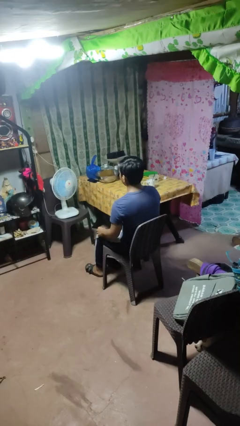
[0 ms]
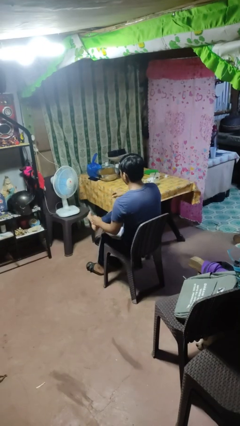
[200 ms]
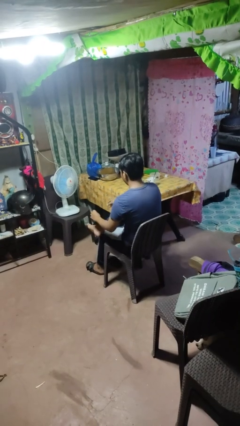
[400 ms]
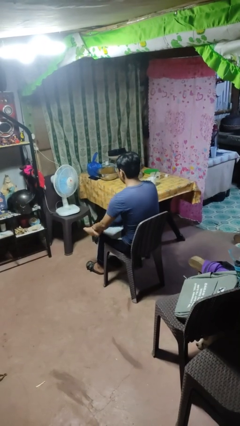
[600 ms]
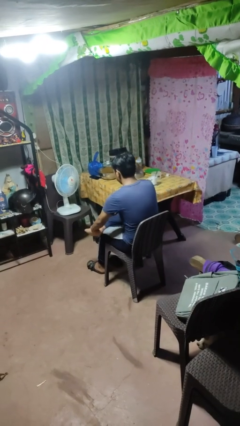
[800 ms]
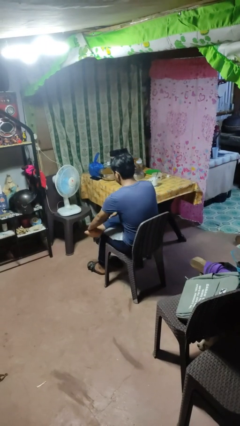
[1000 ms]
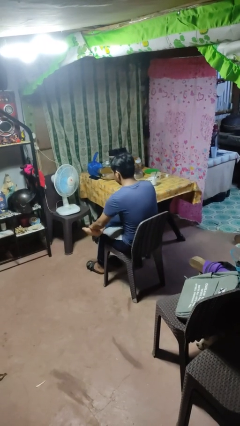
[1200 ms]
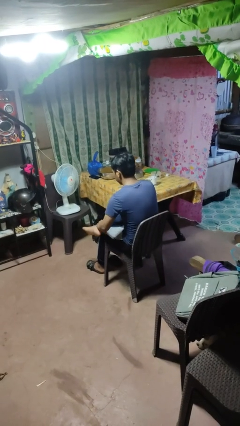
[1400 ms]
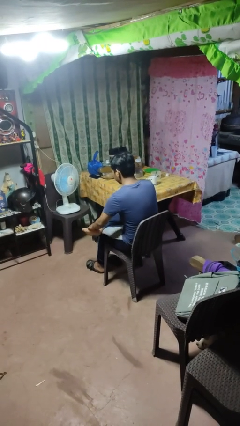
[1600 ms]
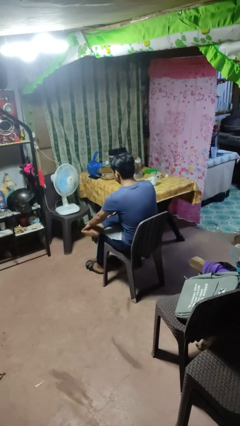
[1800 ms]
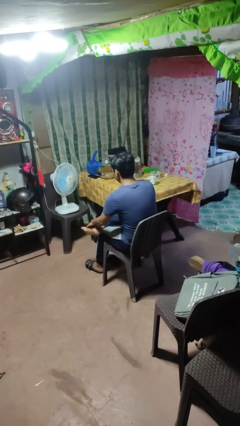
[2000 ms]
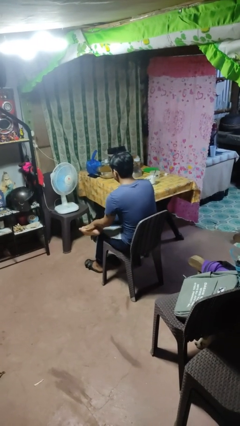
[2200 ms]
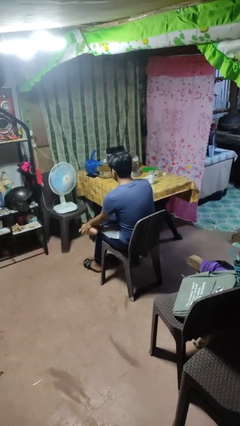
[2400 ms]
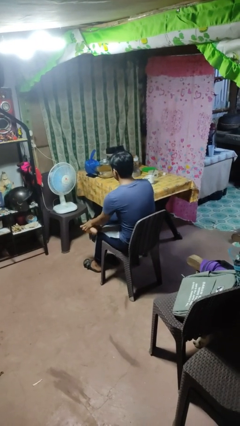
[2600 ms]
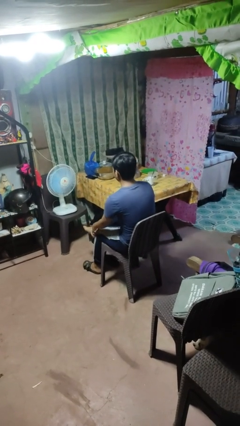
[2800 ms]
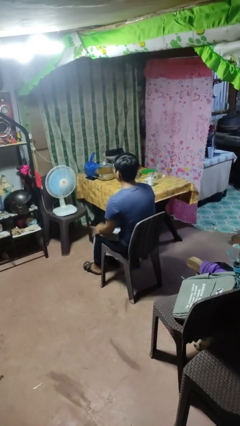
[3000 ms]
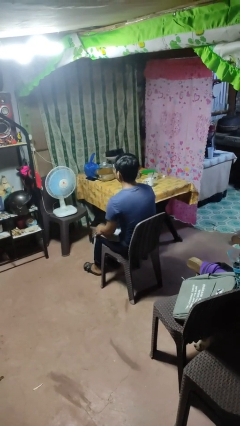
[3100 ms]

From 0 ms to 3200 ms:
person rubs foot

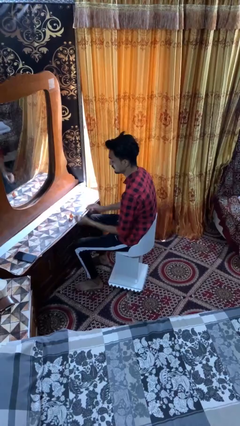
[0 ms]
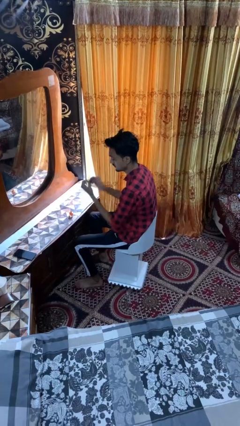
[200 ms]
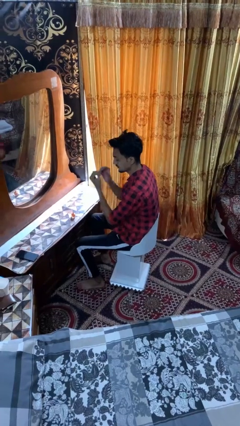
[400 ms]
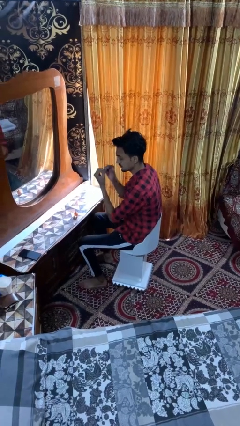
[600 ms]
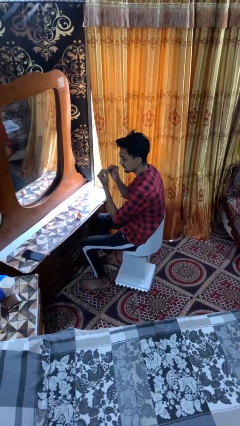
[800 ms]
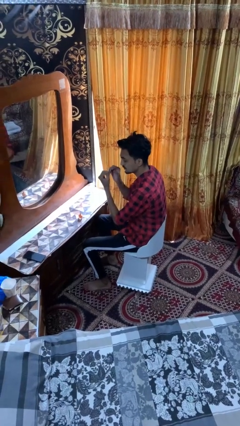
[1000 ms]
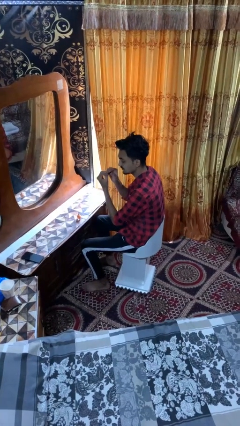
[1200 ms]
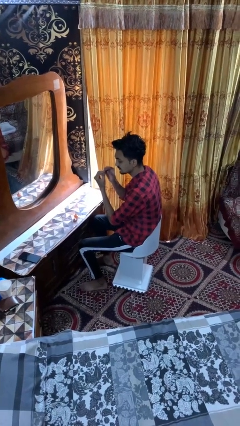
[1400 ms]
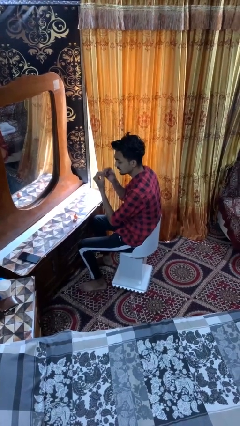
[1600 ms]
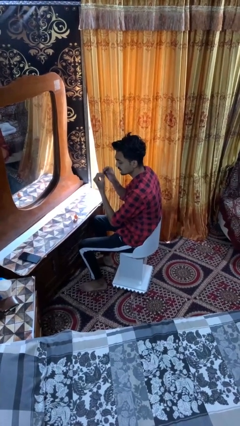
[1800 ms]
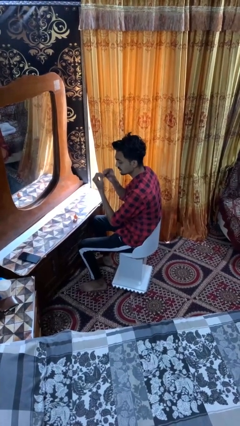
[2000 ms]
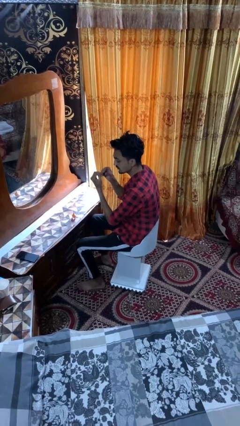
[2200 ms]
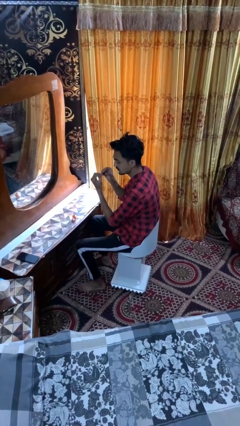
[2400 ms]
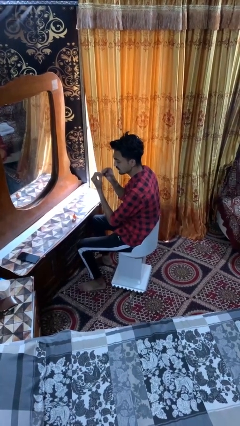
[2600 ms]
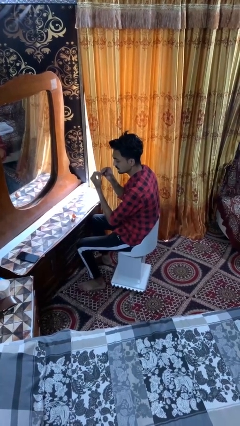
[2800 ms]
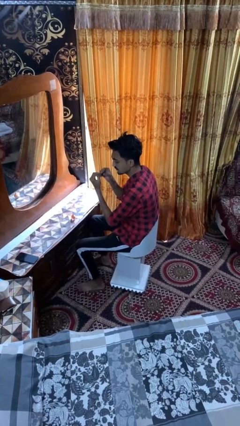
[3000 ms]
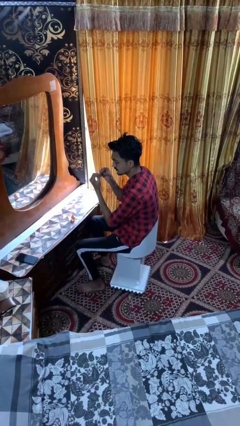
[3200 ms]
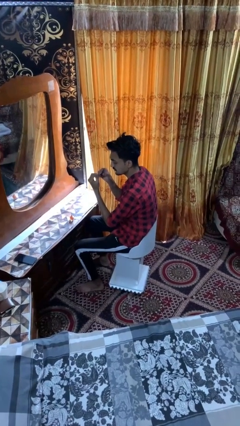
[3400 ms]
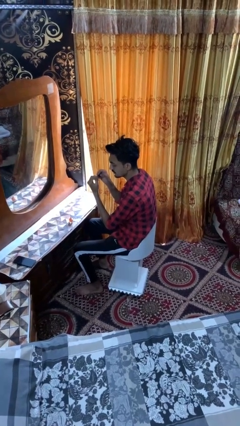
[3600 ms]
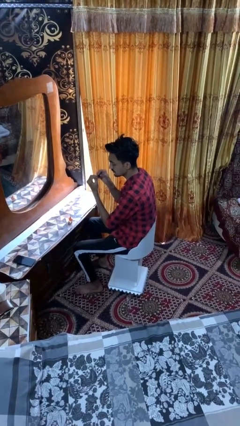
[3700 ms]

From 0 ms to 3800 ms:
person paints fingernails

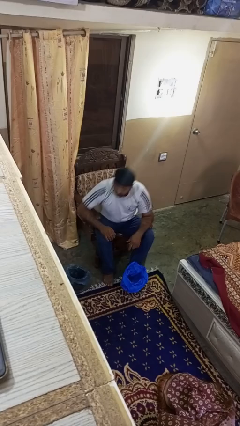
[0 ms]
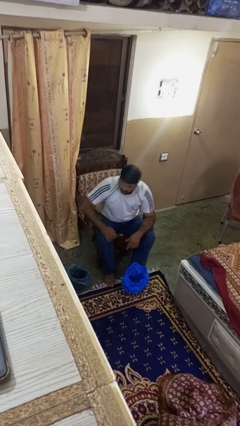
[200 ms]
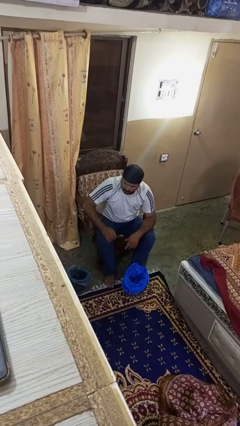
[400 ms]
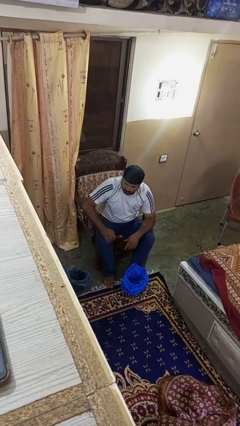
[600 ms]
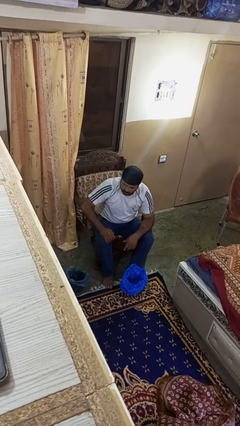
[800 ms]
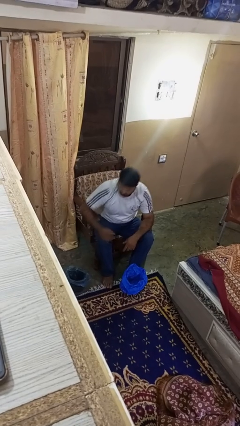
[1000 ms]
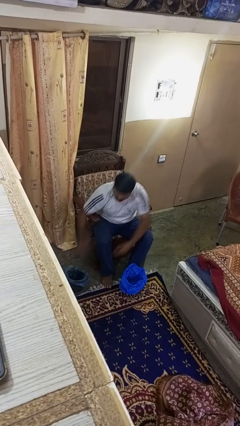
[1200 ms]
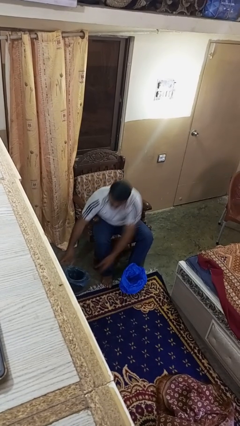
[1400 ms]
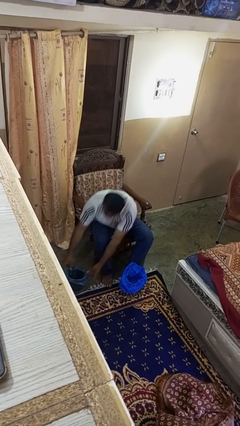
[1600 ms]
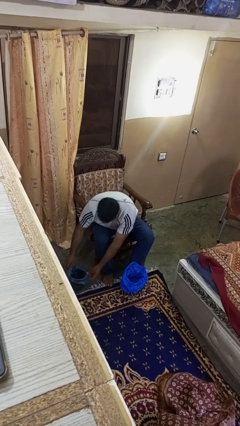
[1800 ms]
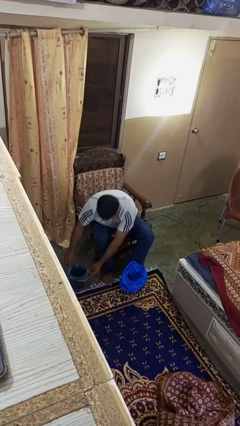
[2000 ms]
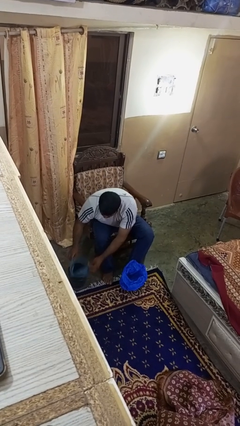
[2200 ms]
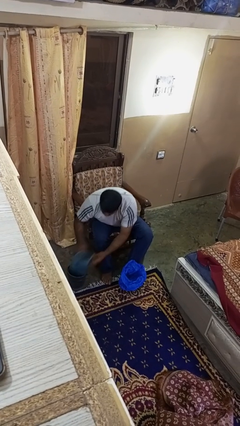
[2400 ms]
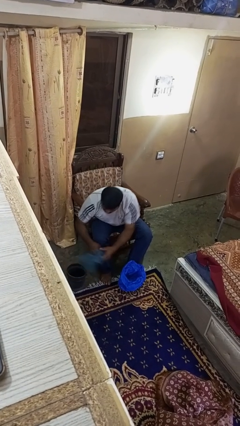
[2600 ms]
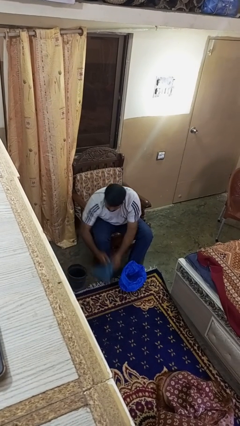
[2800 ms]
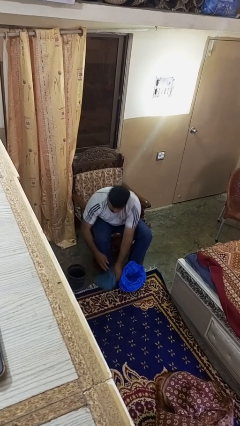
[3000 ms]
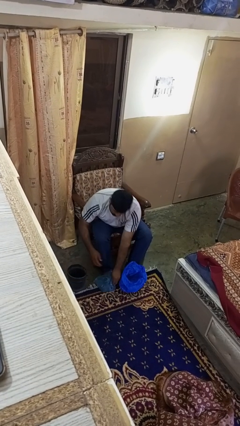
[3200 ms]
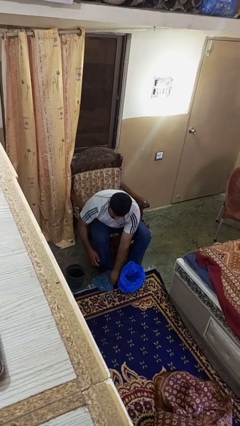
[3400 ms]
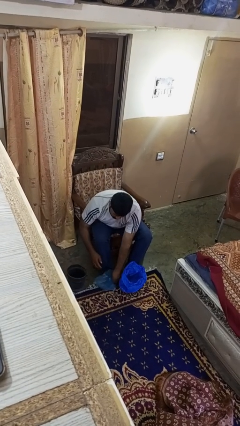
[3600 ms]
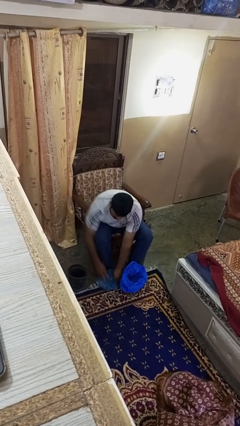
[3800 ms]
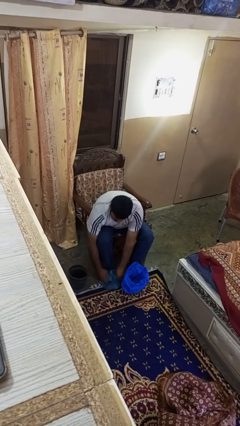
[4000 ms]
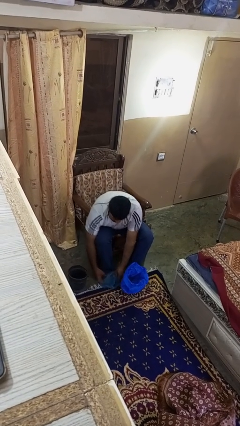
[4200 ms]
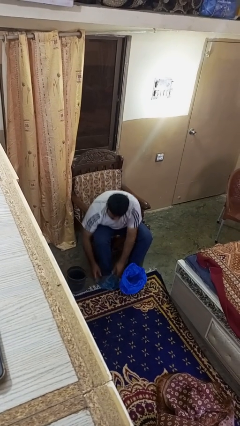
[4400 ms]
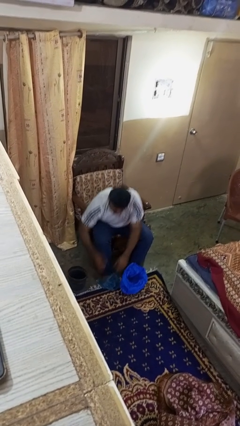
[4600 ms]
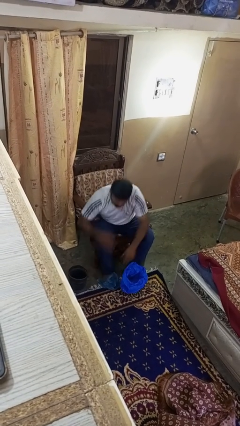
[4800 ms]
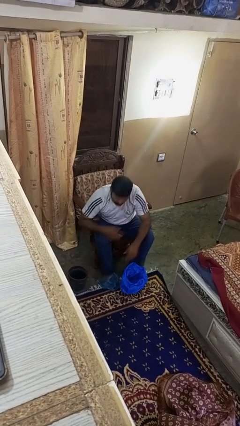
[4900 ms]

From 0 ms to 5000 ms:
person removes trashbag from trashcan

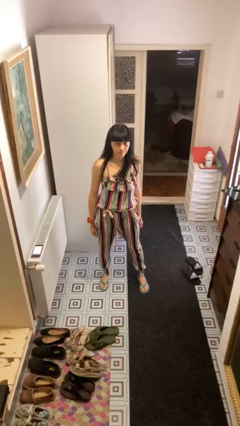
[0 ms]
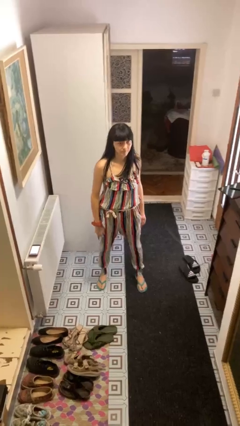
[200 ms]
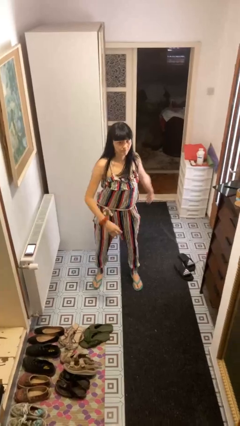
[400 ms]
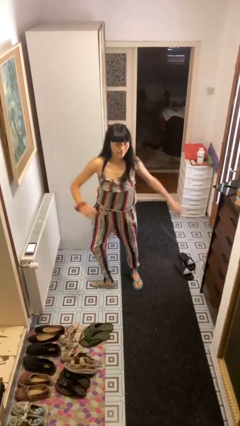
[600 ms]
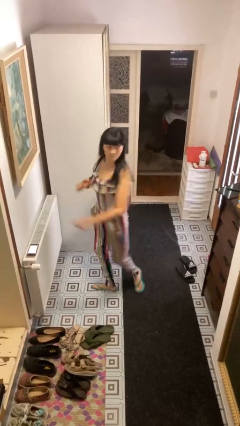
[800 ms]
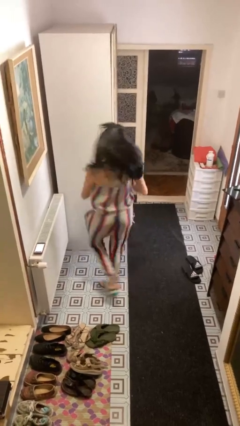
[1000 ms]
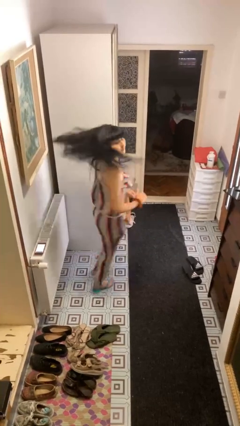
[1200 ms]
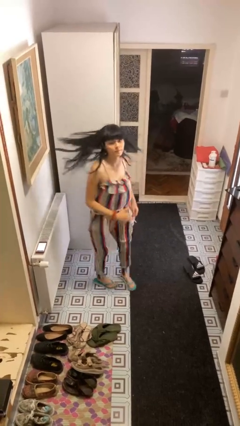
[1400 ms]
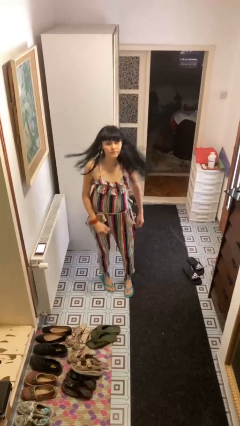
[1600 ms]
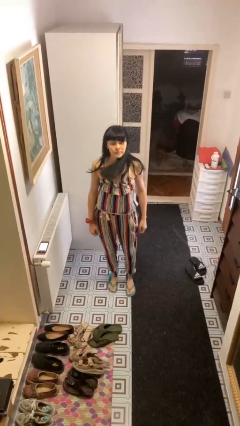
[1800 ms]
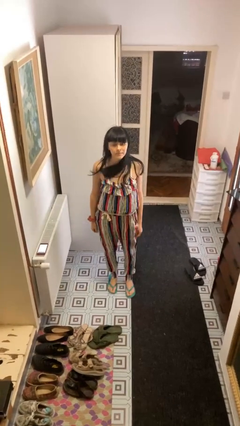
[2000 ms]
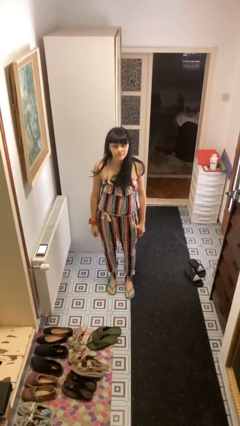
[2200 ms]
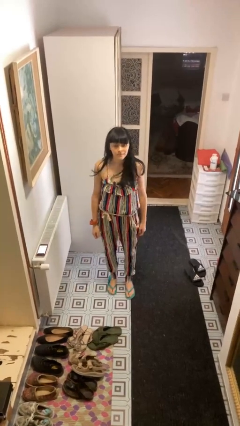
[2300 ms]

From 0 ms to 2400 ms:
person twirls

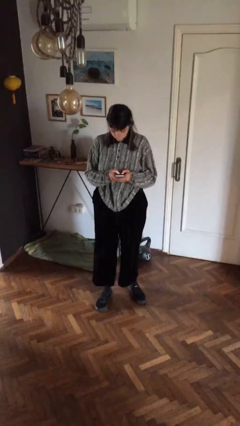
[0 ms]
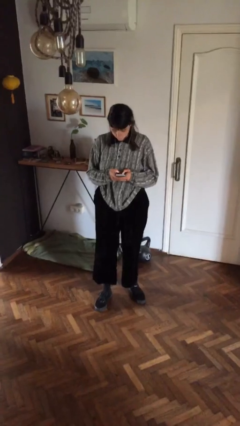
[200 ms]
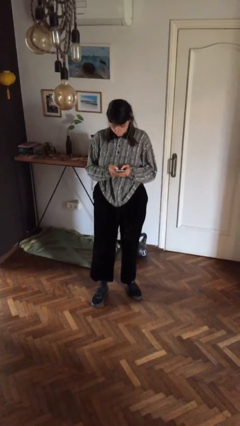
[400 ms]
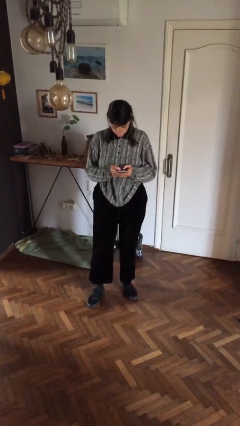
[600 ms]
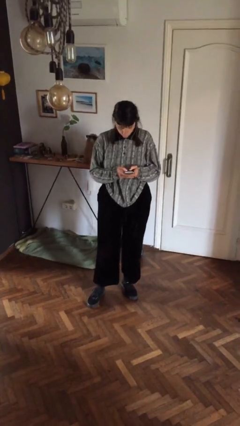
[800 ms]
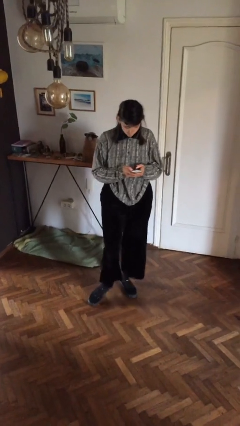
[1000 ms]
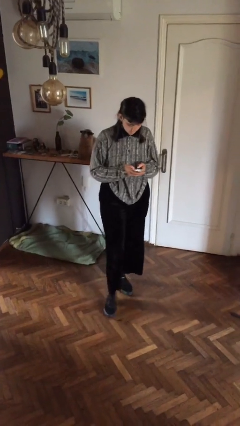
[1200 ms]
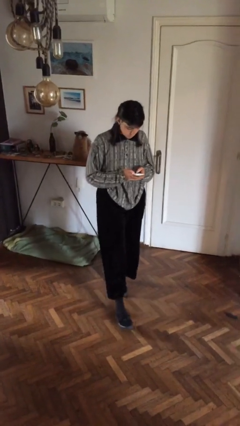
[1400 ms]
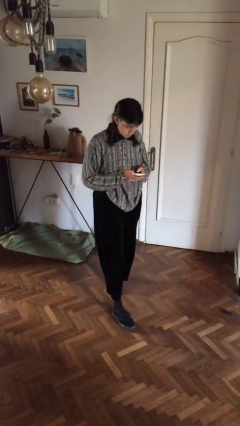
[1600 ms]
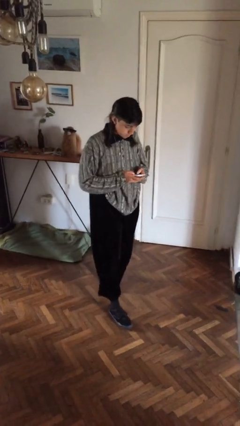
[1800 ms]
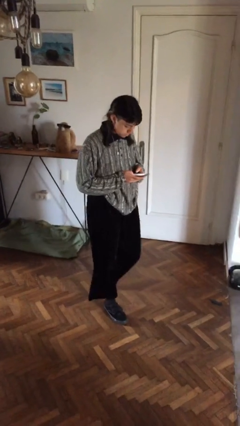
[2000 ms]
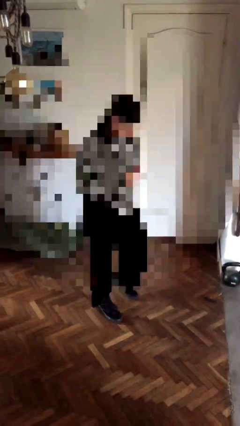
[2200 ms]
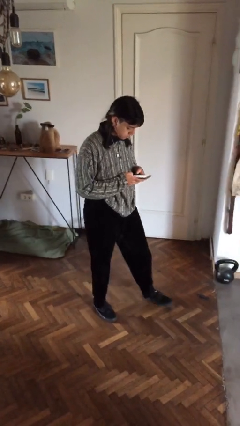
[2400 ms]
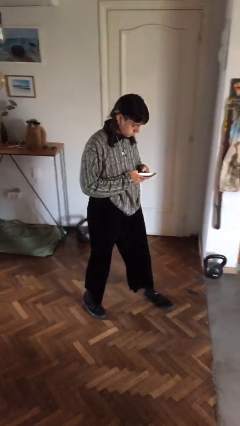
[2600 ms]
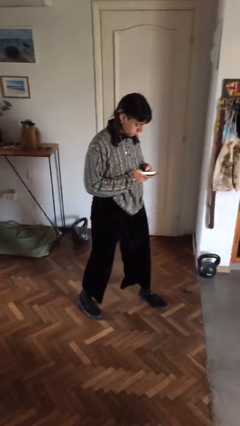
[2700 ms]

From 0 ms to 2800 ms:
person texts on phone

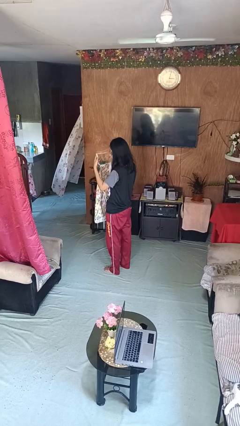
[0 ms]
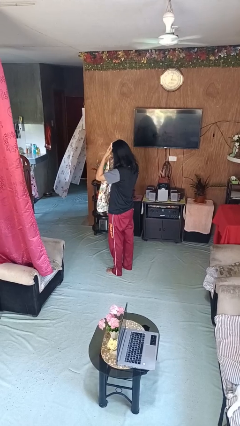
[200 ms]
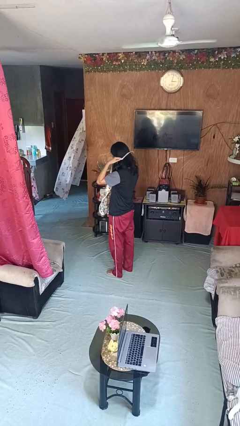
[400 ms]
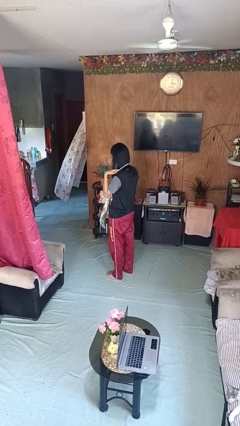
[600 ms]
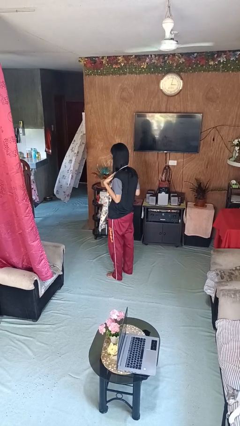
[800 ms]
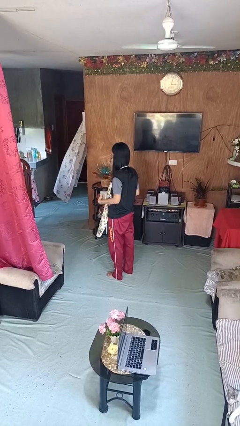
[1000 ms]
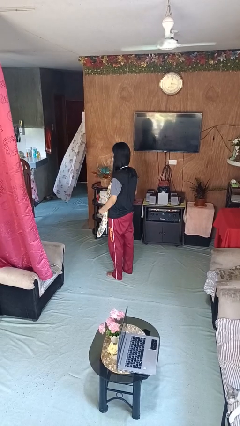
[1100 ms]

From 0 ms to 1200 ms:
person puts on apron
